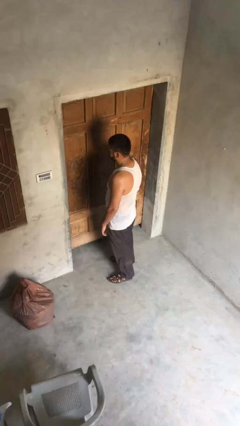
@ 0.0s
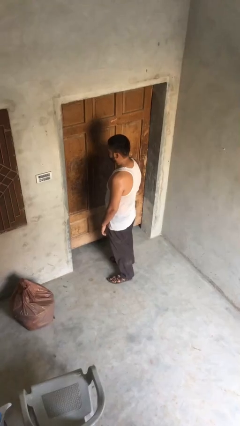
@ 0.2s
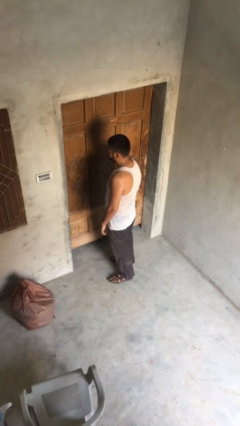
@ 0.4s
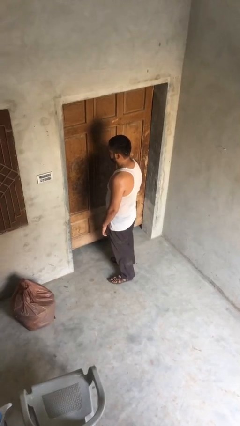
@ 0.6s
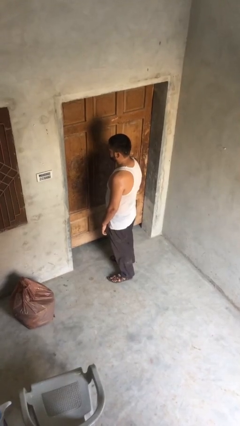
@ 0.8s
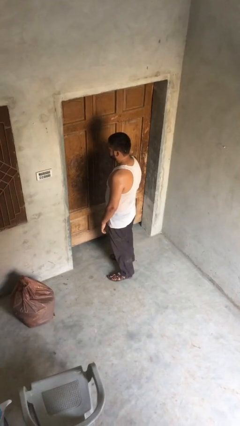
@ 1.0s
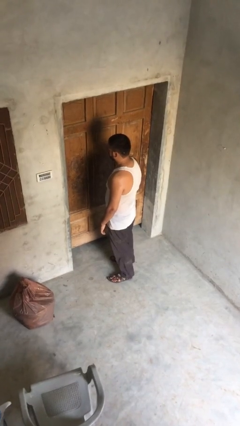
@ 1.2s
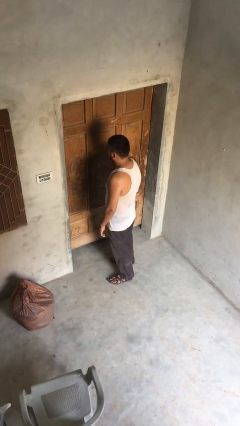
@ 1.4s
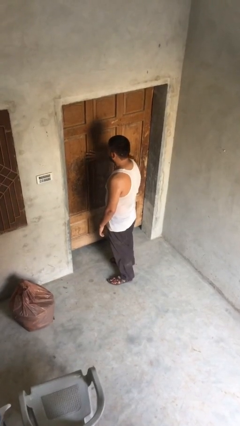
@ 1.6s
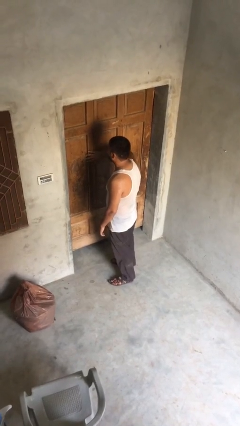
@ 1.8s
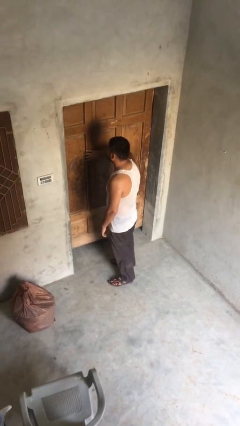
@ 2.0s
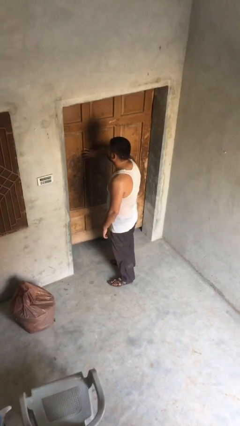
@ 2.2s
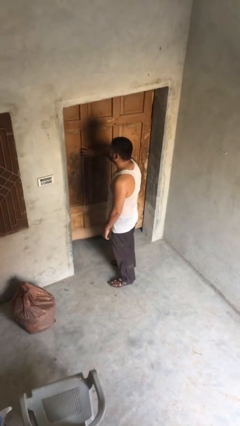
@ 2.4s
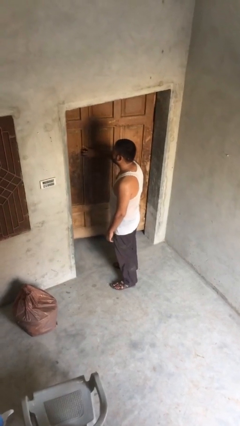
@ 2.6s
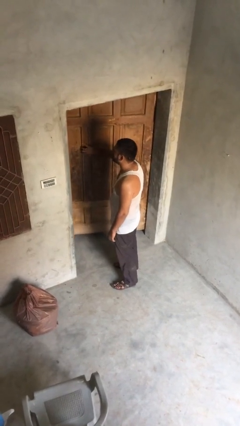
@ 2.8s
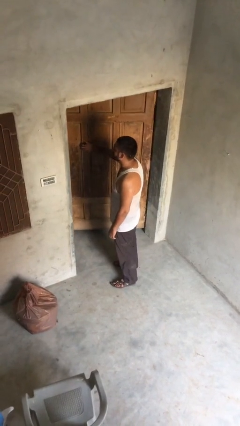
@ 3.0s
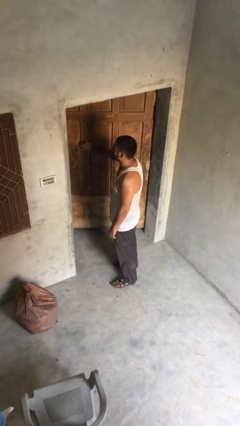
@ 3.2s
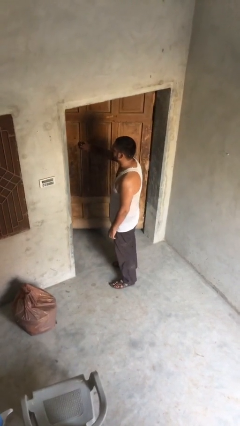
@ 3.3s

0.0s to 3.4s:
person opens facility door

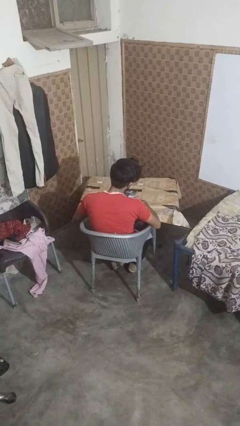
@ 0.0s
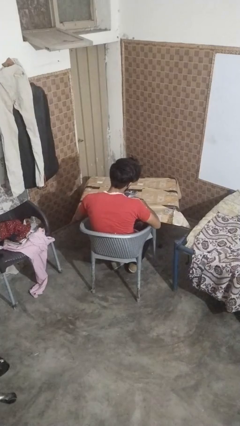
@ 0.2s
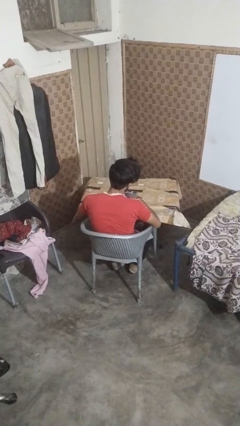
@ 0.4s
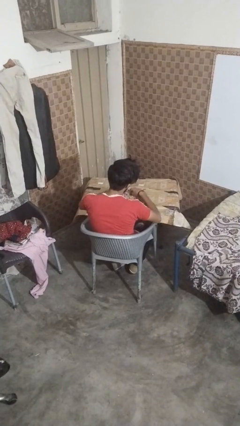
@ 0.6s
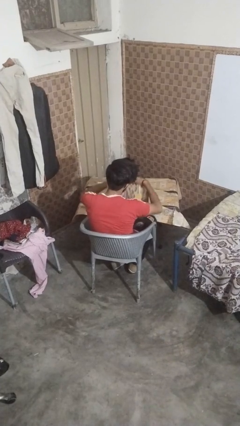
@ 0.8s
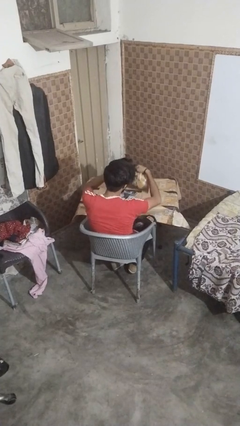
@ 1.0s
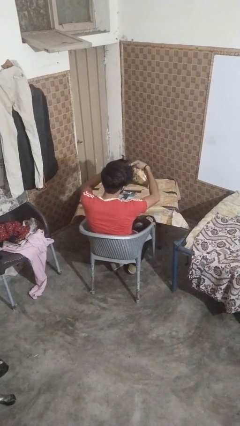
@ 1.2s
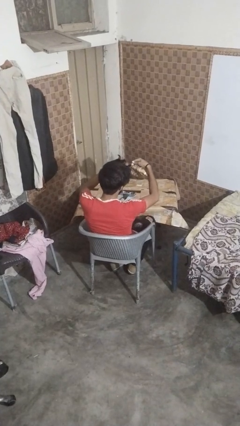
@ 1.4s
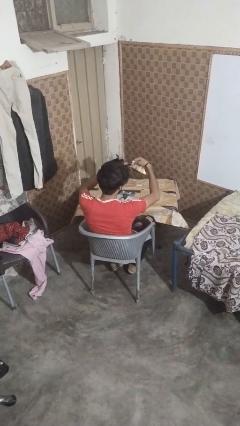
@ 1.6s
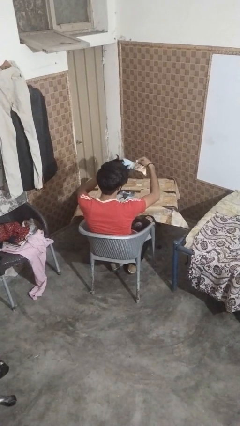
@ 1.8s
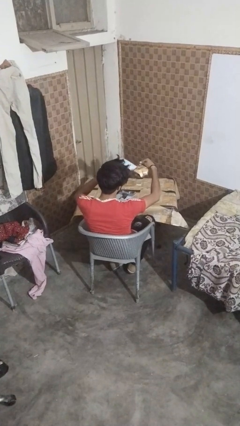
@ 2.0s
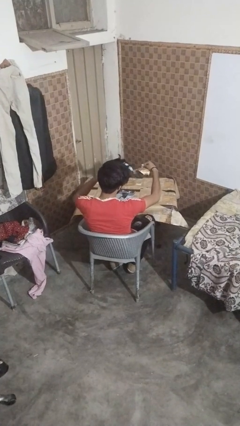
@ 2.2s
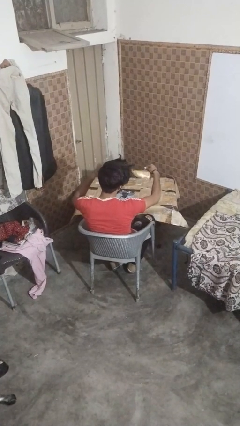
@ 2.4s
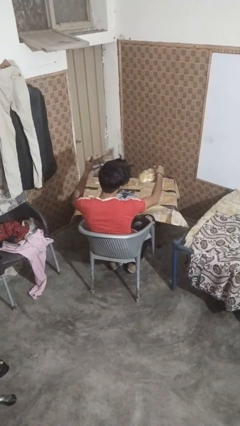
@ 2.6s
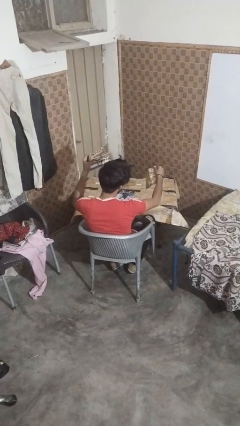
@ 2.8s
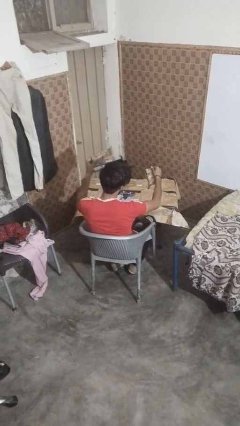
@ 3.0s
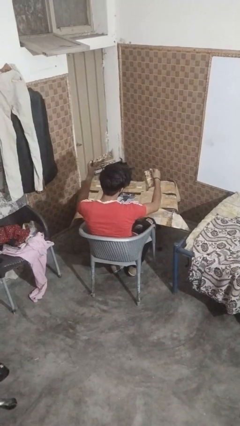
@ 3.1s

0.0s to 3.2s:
person tears paper

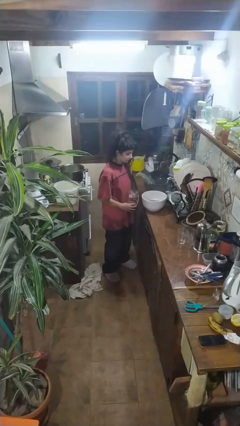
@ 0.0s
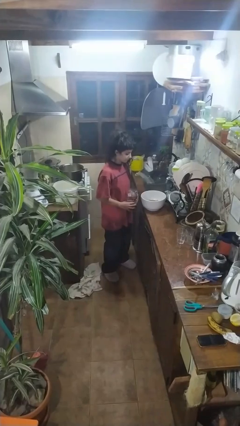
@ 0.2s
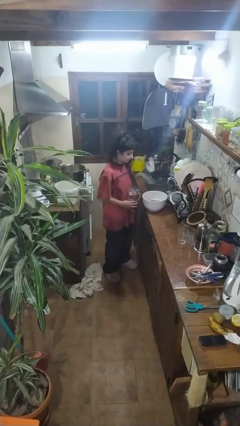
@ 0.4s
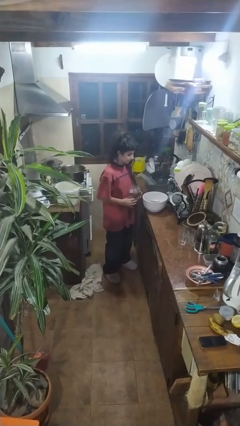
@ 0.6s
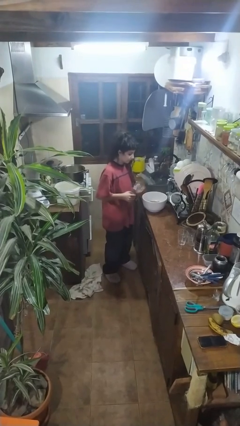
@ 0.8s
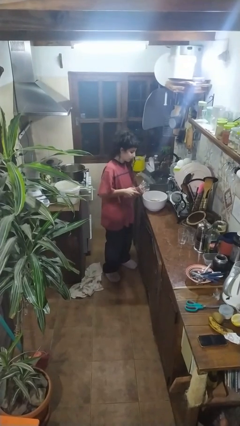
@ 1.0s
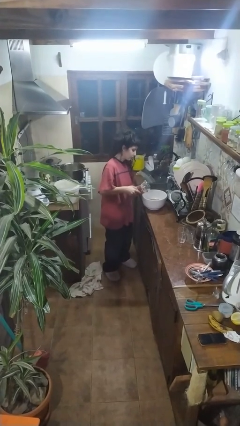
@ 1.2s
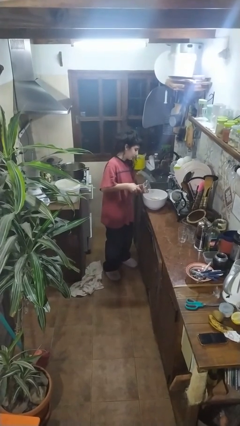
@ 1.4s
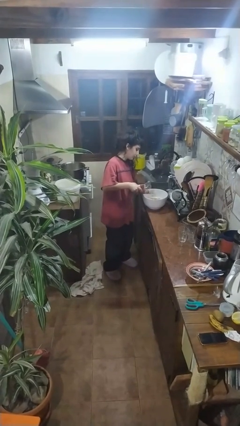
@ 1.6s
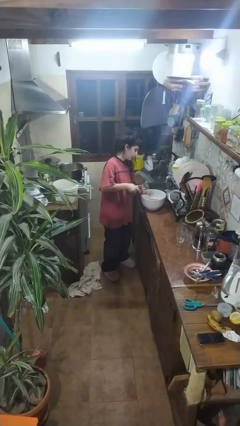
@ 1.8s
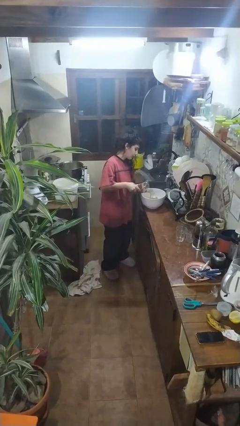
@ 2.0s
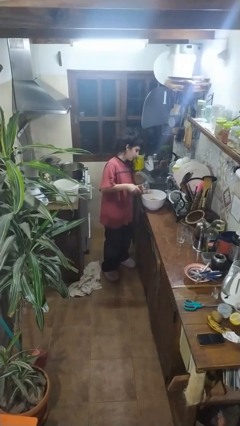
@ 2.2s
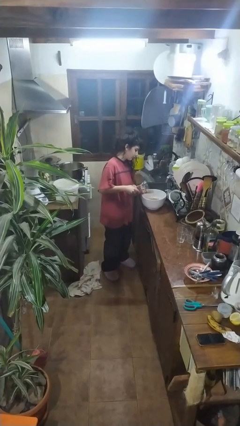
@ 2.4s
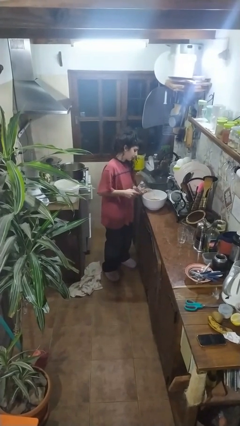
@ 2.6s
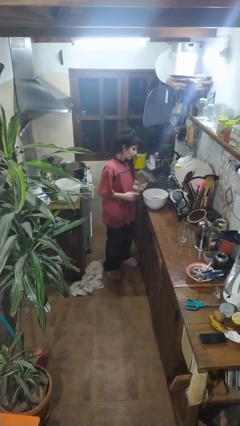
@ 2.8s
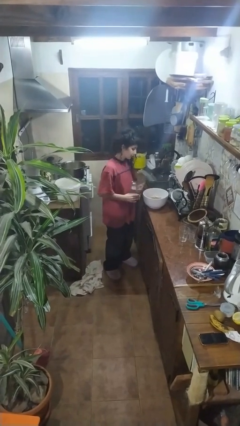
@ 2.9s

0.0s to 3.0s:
person pours into bowl

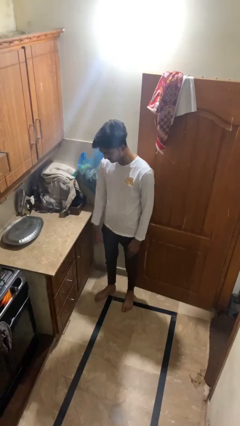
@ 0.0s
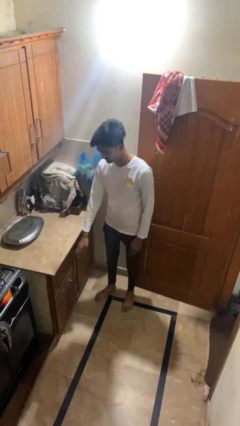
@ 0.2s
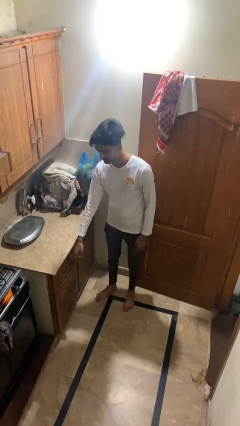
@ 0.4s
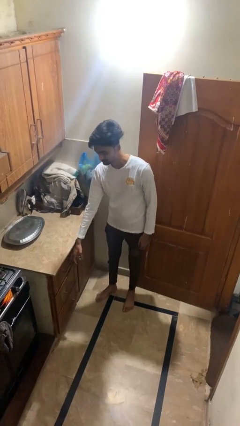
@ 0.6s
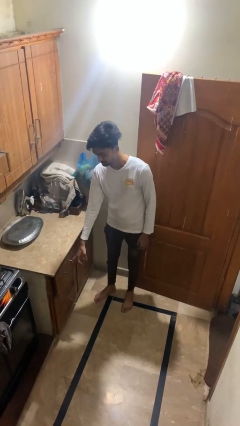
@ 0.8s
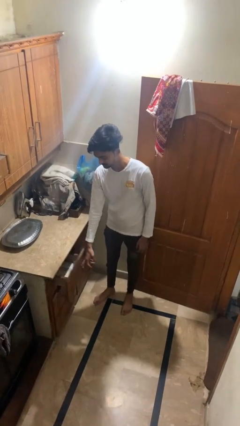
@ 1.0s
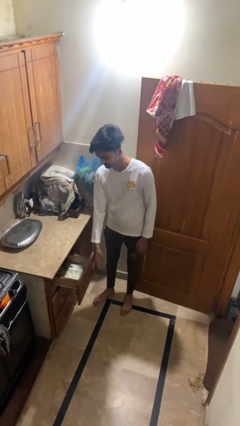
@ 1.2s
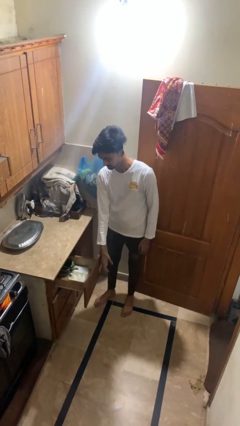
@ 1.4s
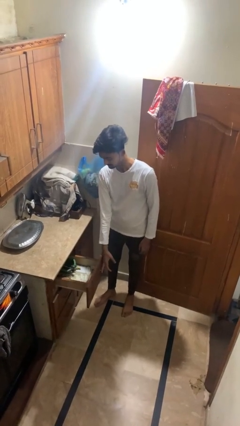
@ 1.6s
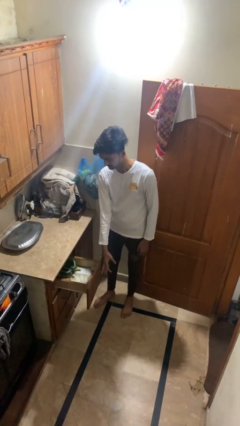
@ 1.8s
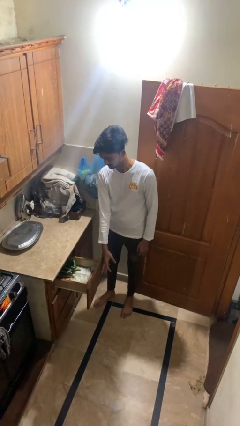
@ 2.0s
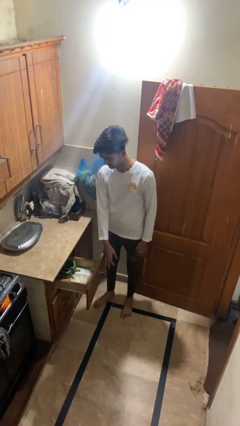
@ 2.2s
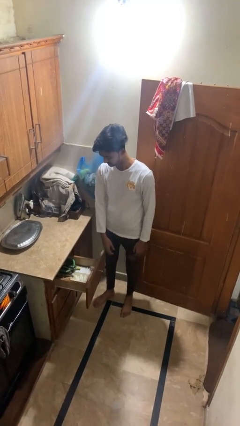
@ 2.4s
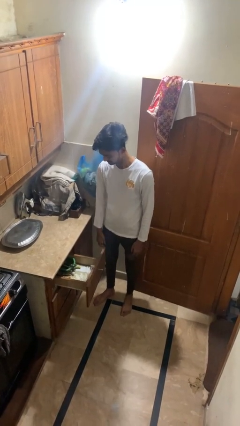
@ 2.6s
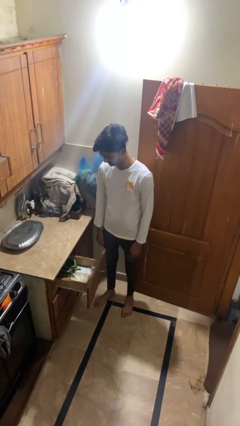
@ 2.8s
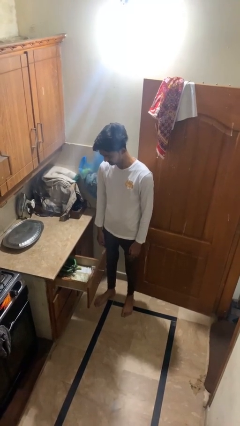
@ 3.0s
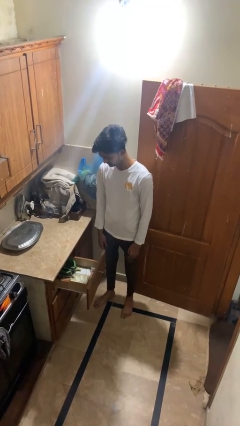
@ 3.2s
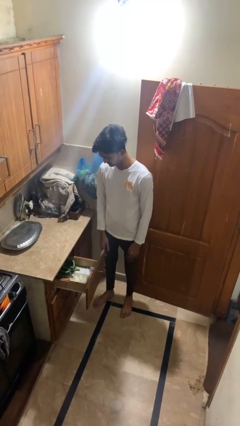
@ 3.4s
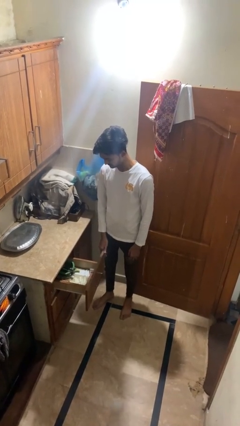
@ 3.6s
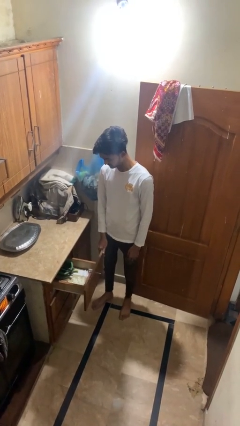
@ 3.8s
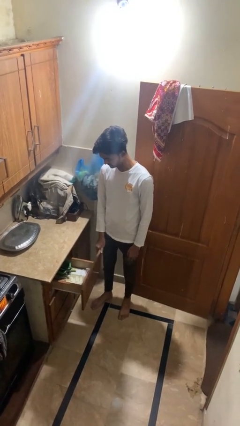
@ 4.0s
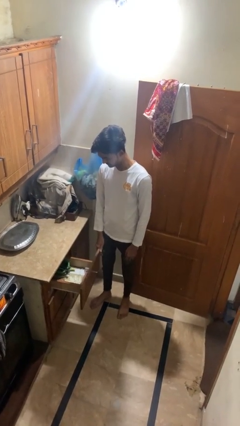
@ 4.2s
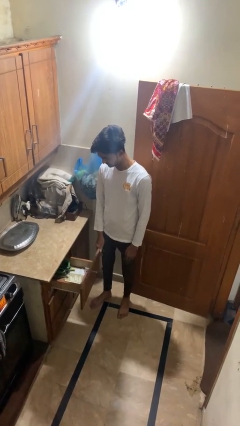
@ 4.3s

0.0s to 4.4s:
person opens kitchen drawer

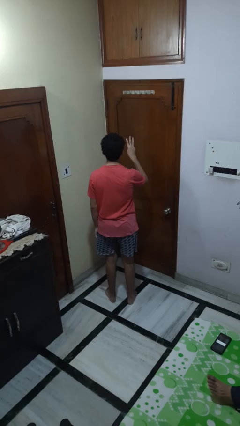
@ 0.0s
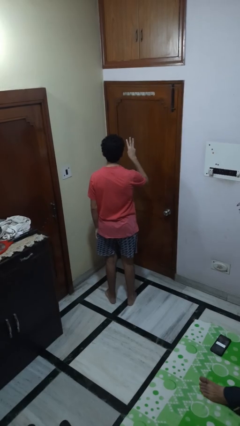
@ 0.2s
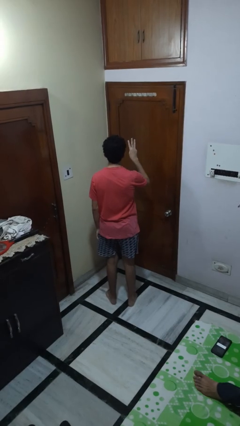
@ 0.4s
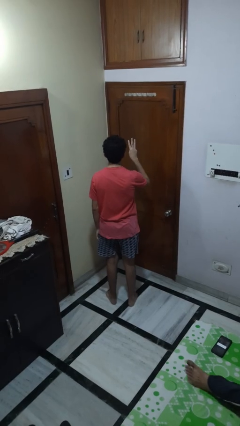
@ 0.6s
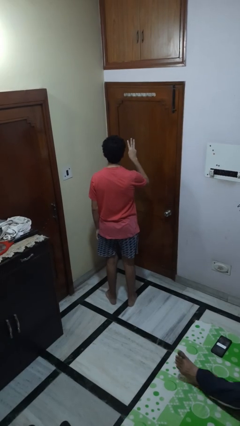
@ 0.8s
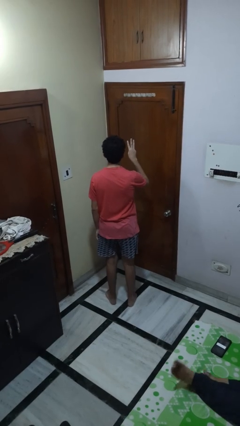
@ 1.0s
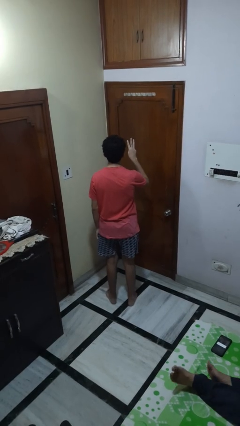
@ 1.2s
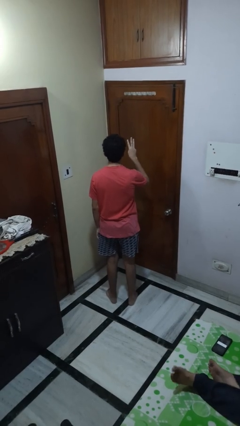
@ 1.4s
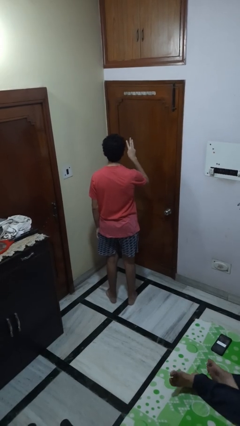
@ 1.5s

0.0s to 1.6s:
person gestures number three

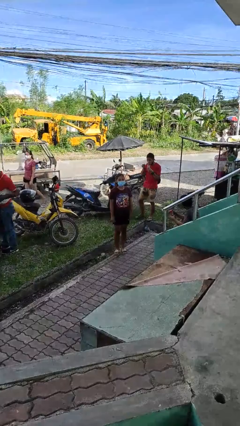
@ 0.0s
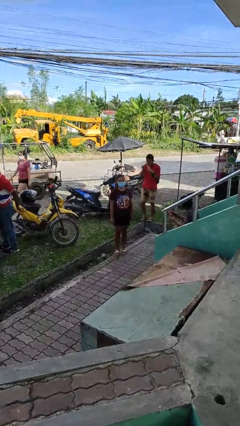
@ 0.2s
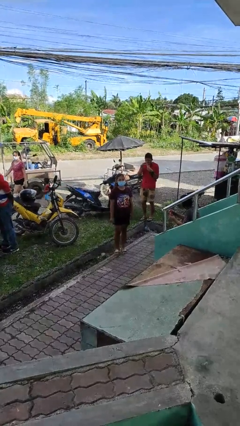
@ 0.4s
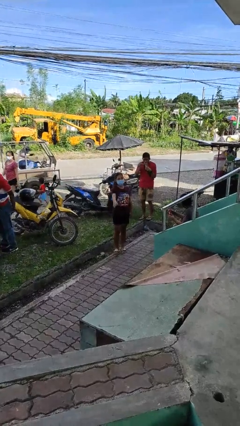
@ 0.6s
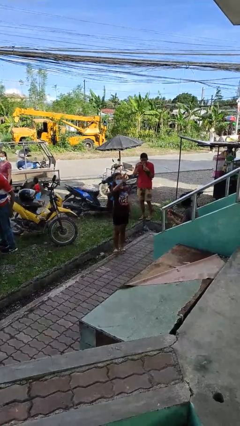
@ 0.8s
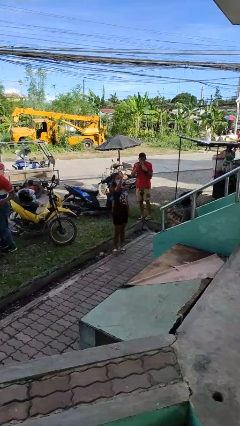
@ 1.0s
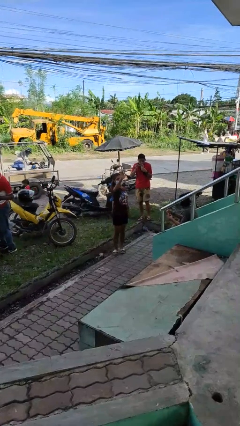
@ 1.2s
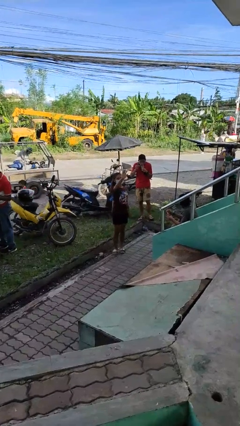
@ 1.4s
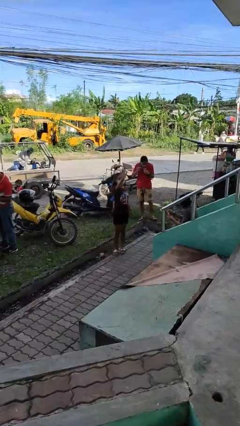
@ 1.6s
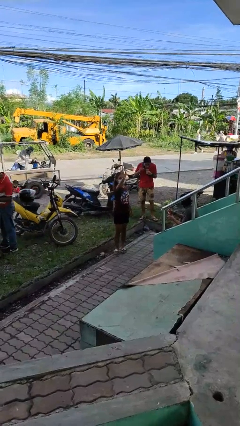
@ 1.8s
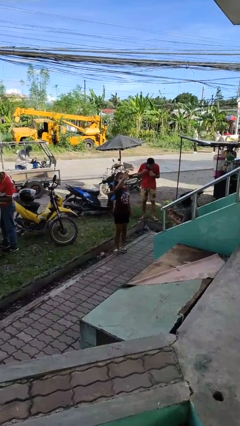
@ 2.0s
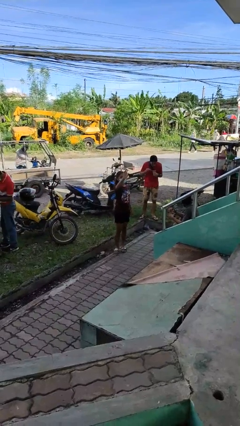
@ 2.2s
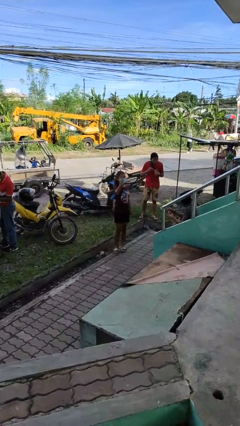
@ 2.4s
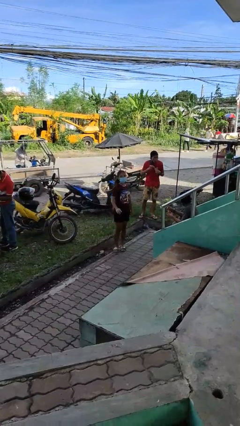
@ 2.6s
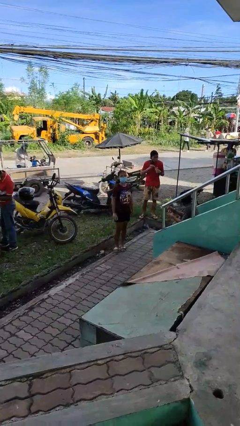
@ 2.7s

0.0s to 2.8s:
person waves at person
